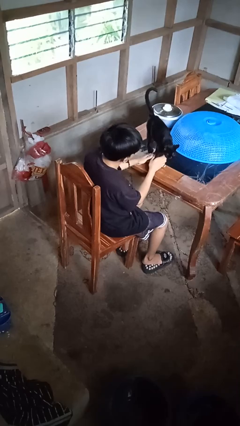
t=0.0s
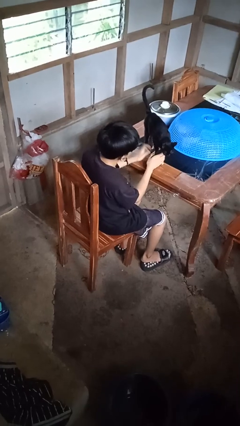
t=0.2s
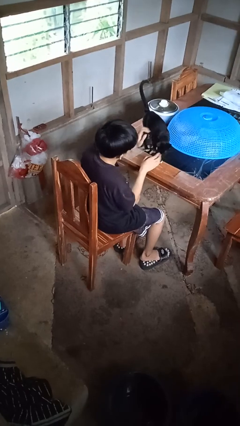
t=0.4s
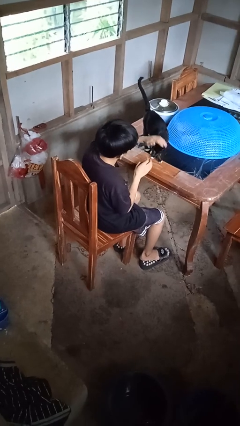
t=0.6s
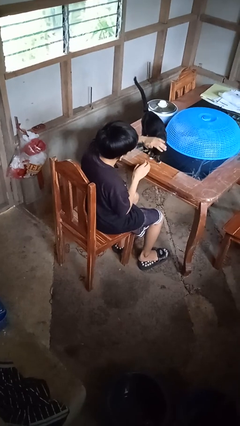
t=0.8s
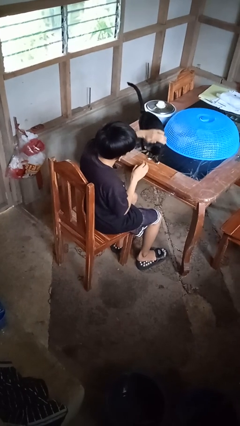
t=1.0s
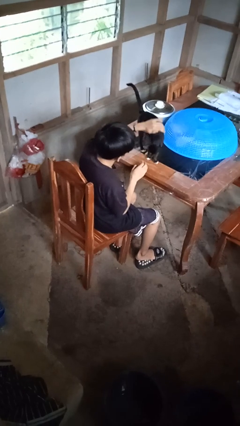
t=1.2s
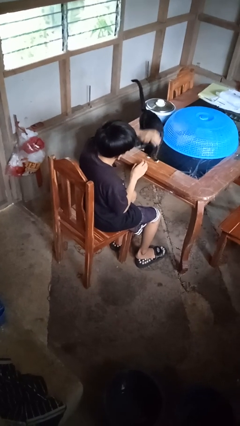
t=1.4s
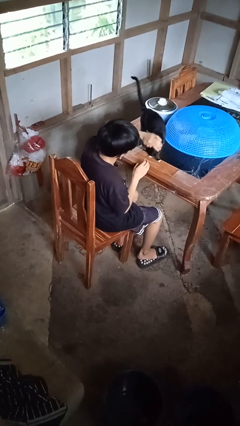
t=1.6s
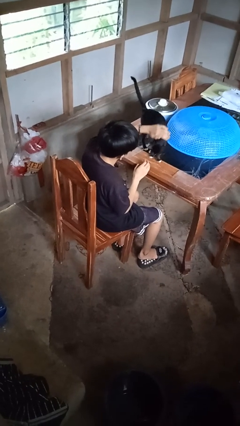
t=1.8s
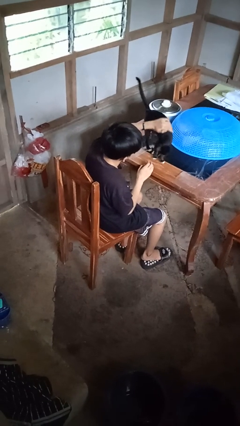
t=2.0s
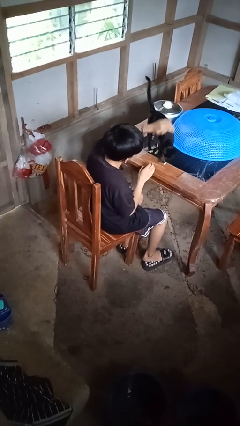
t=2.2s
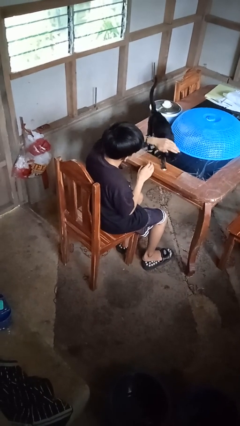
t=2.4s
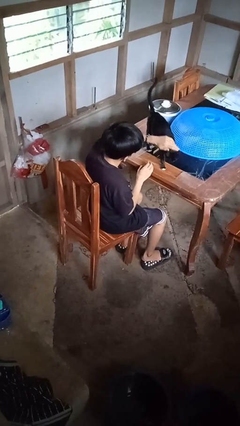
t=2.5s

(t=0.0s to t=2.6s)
person pets cat

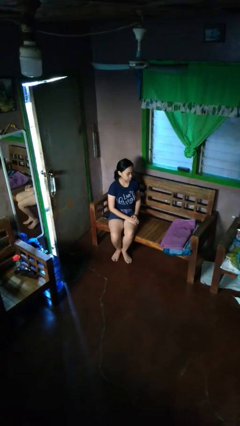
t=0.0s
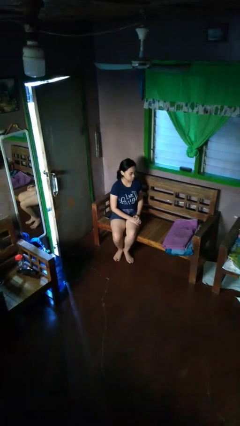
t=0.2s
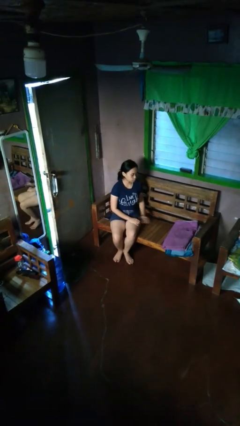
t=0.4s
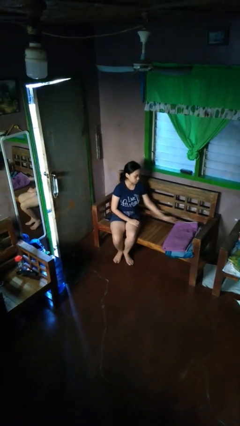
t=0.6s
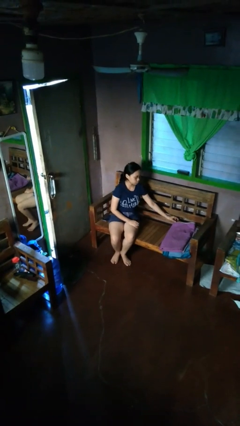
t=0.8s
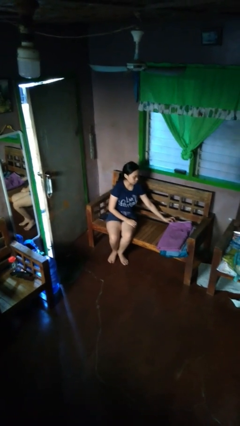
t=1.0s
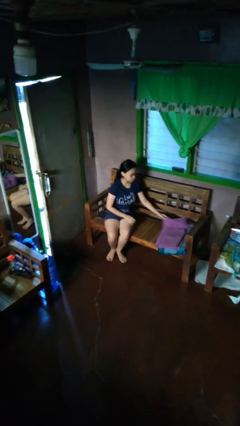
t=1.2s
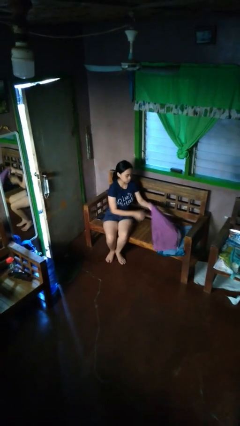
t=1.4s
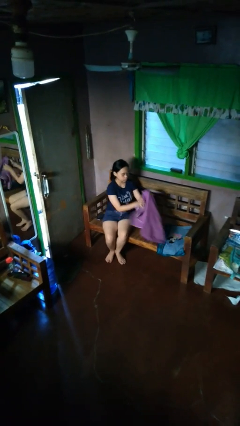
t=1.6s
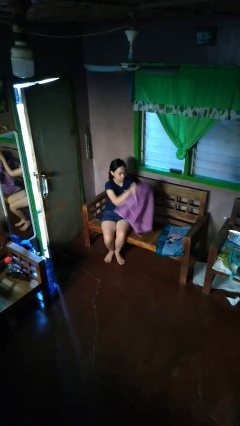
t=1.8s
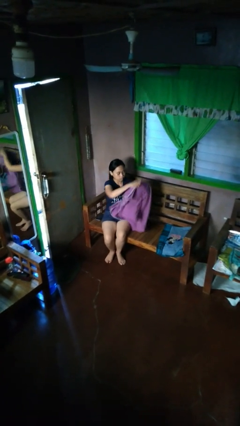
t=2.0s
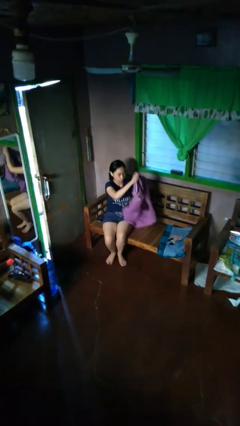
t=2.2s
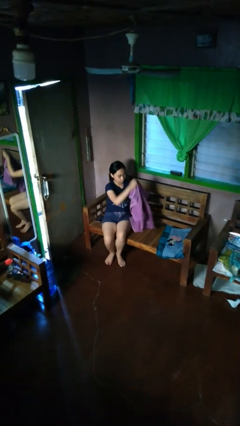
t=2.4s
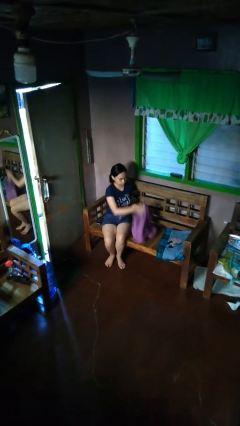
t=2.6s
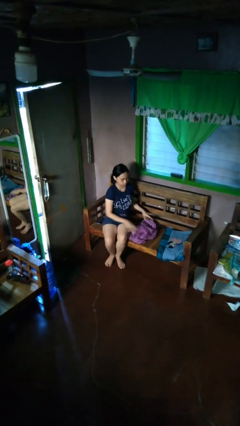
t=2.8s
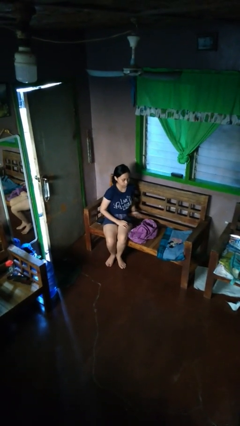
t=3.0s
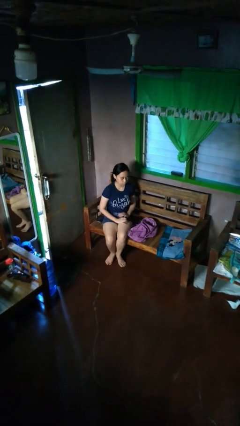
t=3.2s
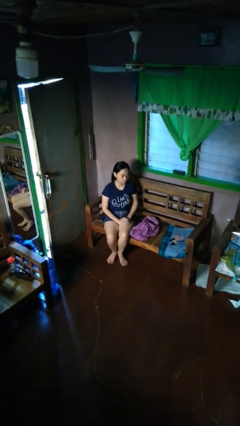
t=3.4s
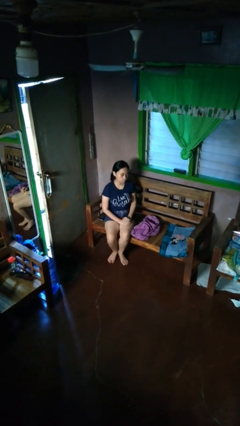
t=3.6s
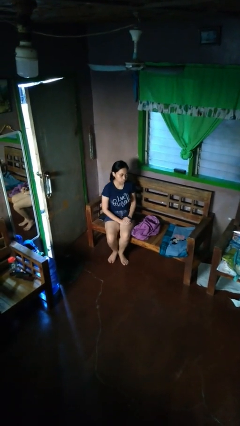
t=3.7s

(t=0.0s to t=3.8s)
person unfolds blanket

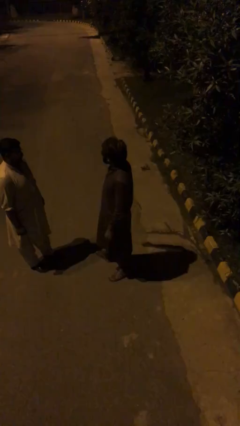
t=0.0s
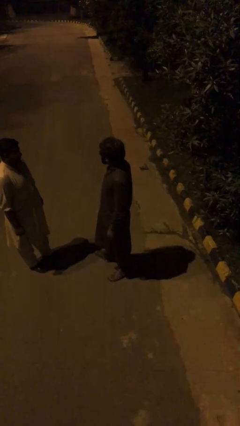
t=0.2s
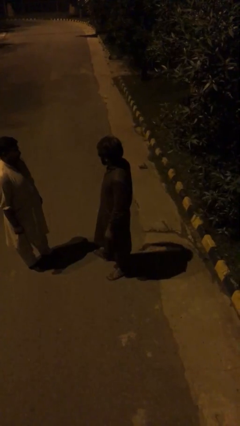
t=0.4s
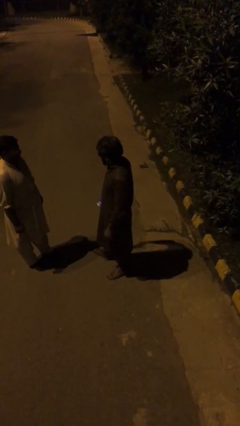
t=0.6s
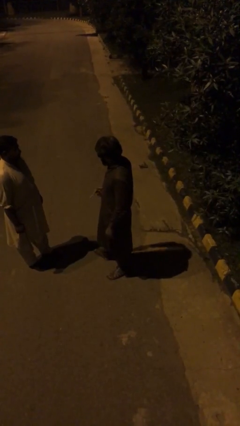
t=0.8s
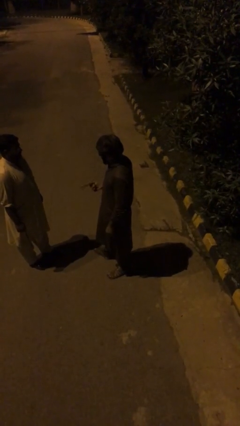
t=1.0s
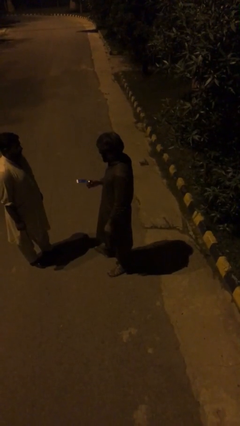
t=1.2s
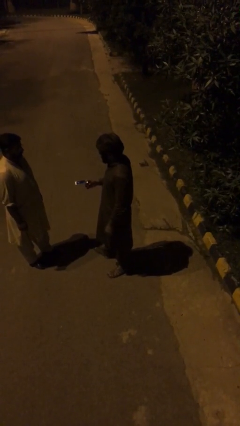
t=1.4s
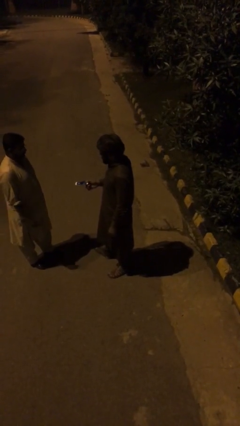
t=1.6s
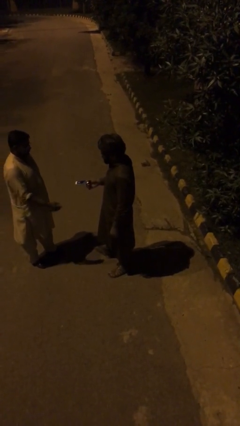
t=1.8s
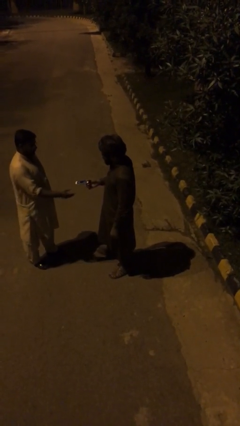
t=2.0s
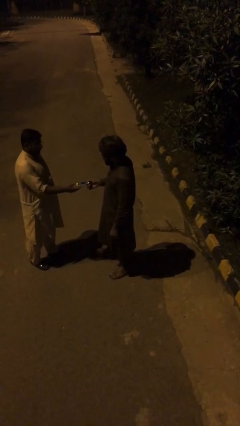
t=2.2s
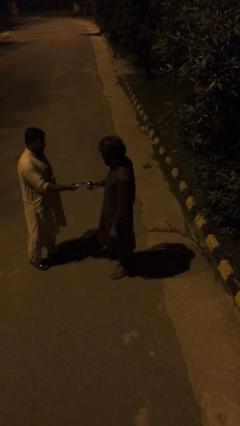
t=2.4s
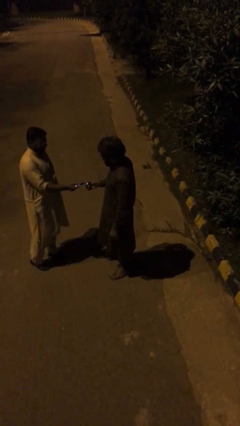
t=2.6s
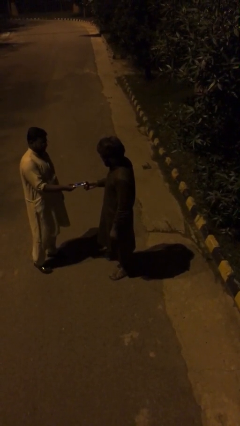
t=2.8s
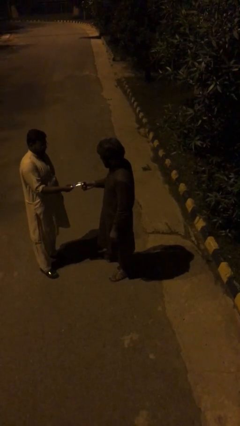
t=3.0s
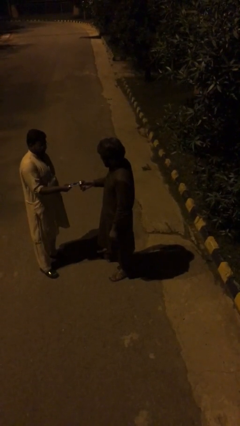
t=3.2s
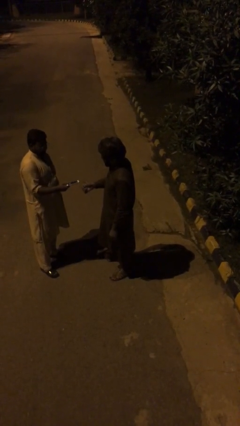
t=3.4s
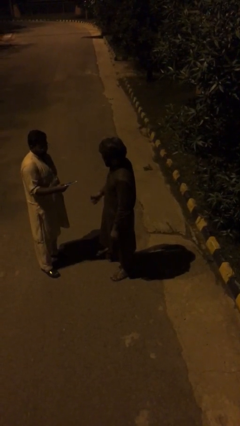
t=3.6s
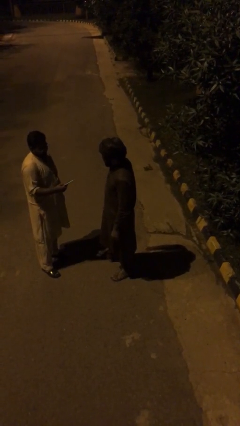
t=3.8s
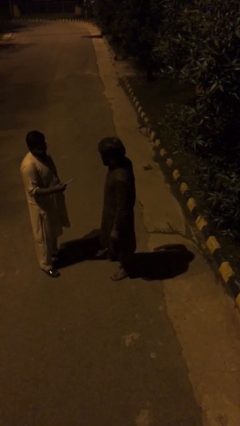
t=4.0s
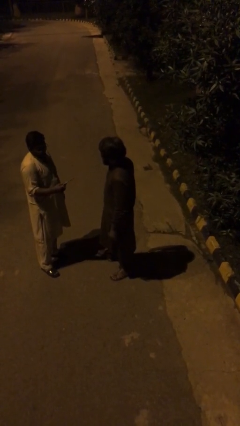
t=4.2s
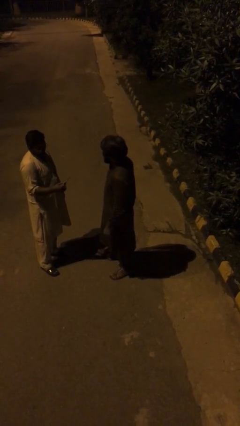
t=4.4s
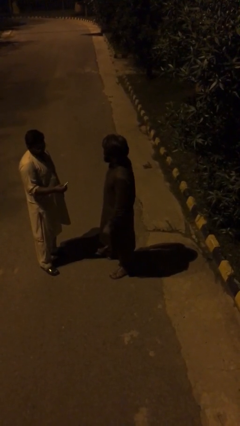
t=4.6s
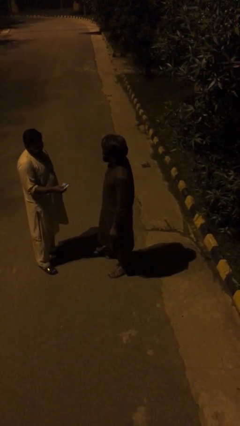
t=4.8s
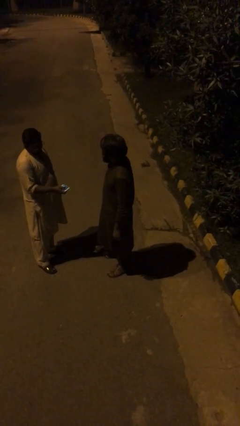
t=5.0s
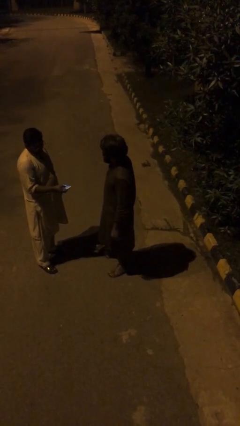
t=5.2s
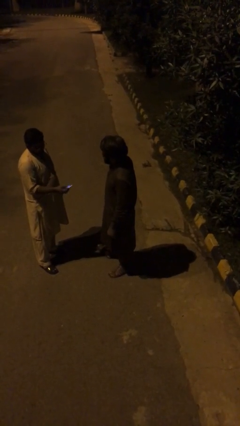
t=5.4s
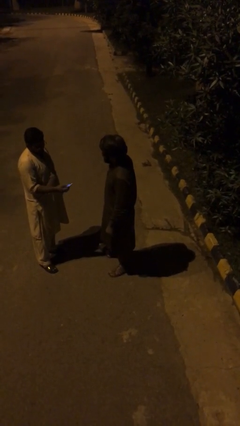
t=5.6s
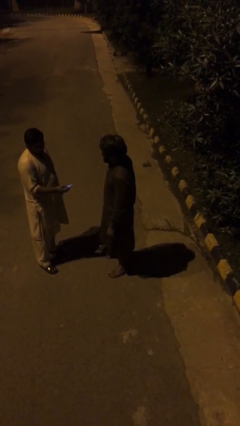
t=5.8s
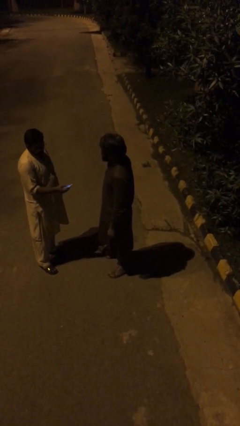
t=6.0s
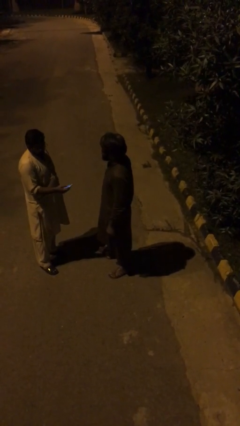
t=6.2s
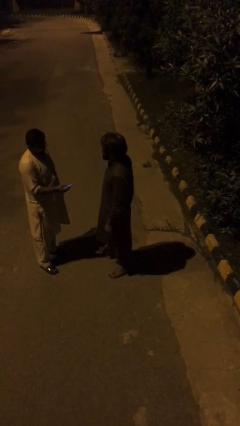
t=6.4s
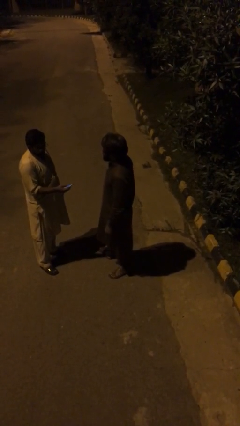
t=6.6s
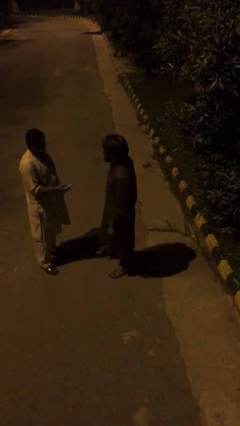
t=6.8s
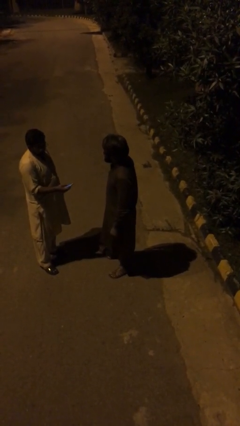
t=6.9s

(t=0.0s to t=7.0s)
person transfers object to person

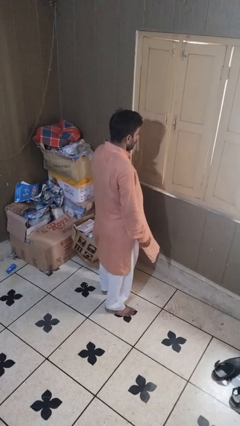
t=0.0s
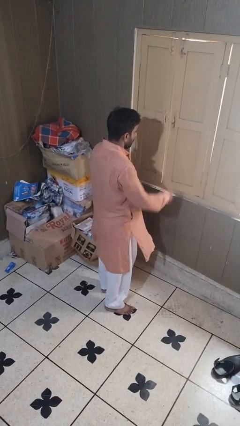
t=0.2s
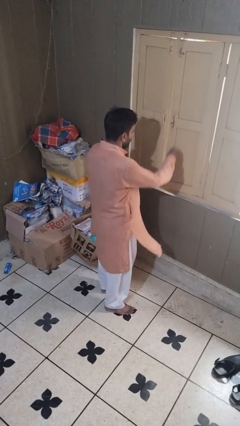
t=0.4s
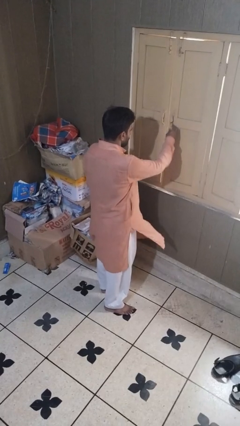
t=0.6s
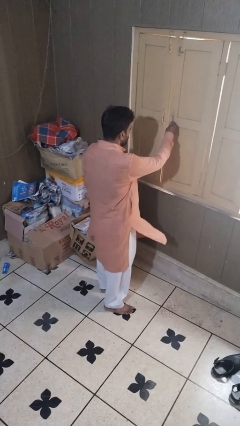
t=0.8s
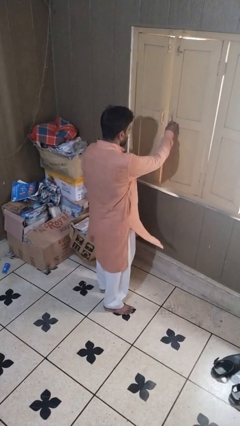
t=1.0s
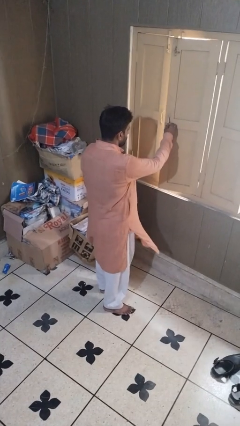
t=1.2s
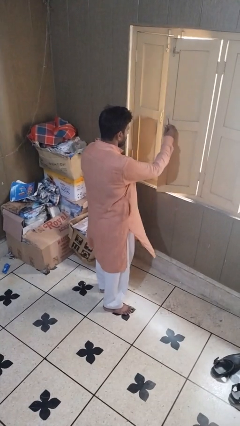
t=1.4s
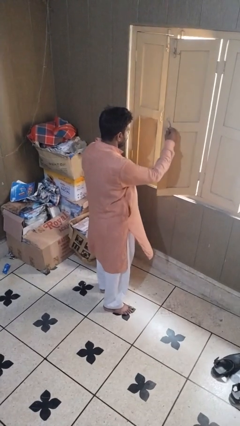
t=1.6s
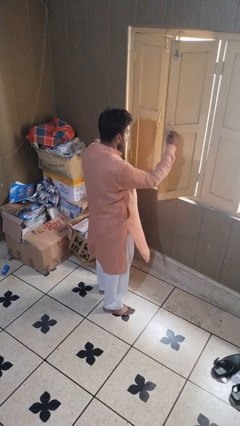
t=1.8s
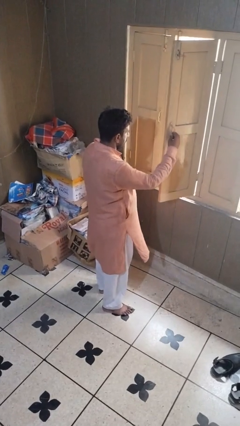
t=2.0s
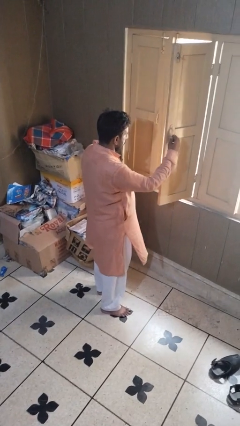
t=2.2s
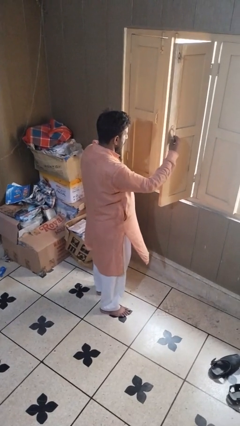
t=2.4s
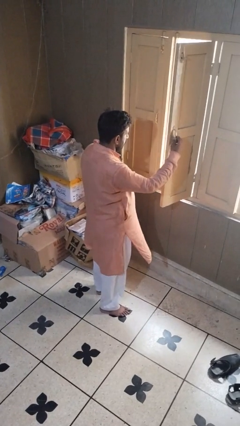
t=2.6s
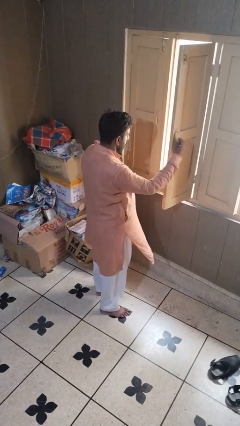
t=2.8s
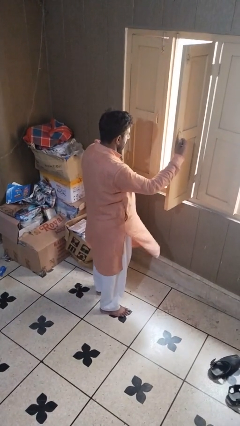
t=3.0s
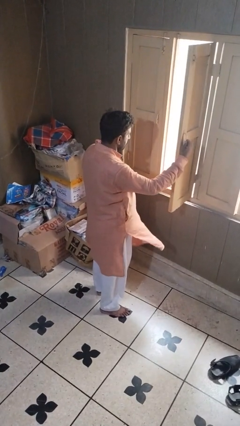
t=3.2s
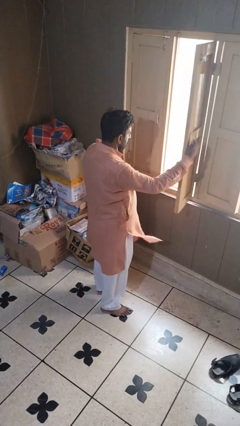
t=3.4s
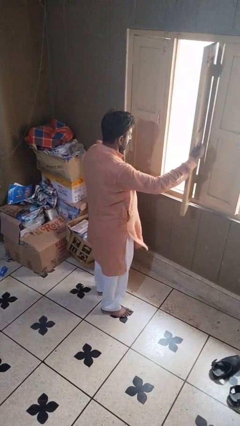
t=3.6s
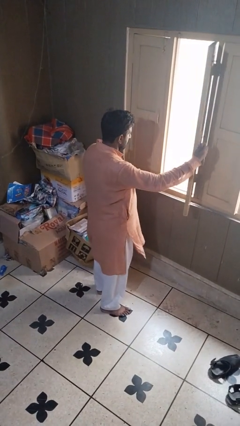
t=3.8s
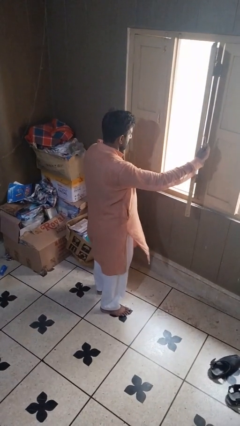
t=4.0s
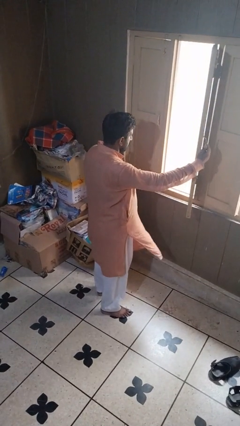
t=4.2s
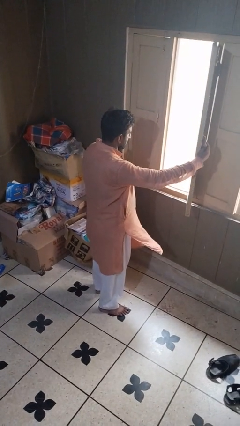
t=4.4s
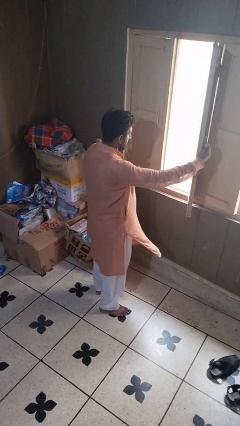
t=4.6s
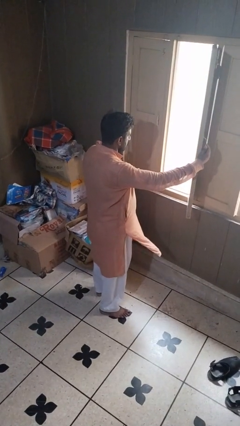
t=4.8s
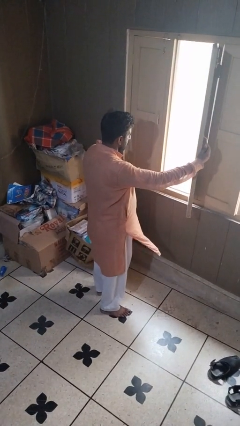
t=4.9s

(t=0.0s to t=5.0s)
person opens home window
